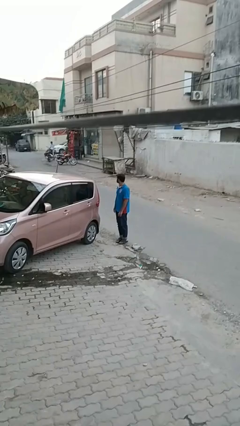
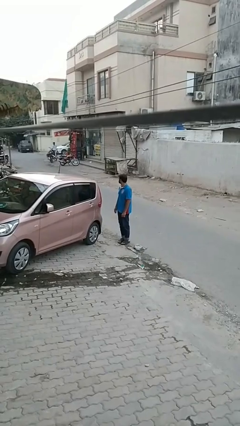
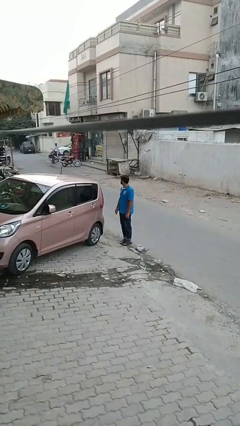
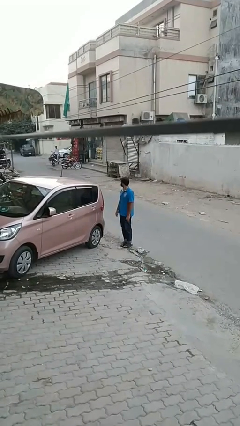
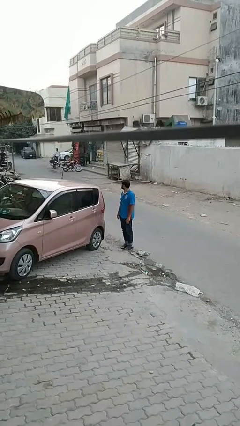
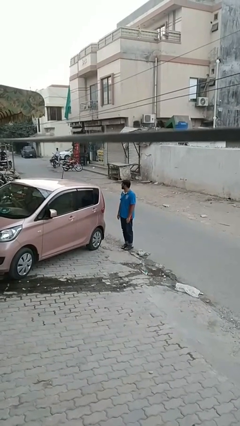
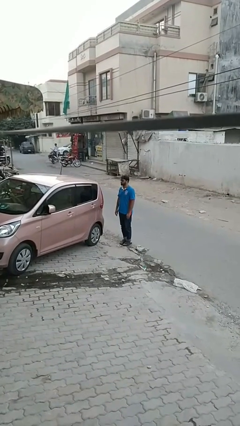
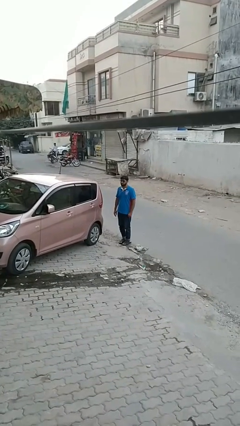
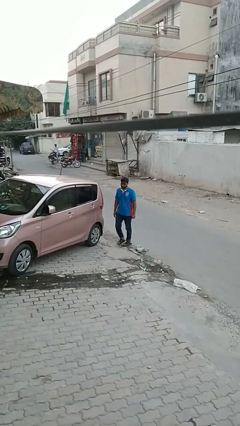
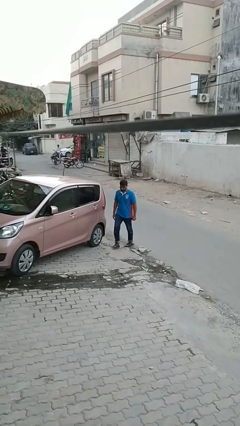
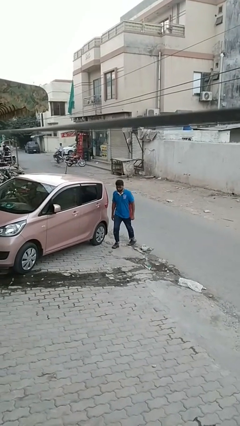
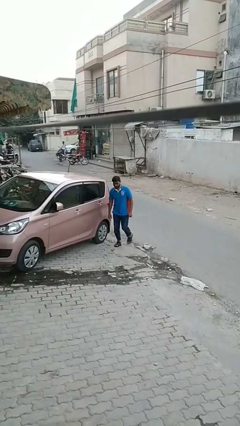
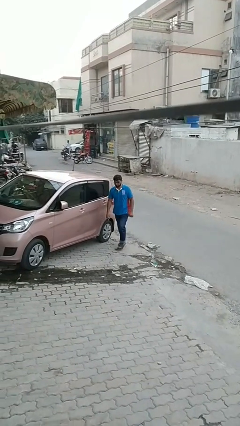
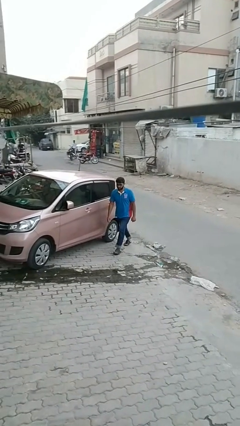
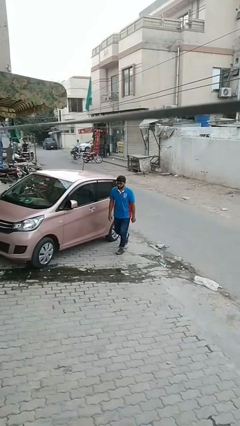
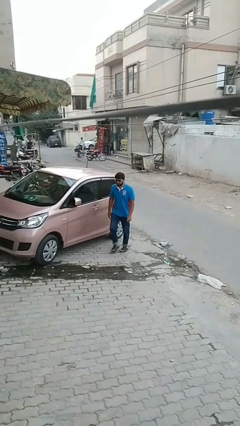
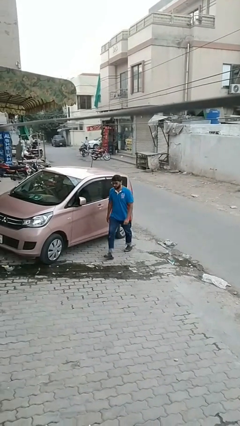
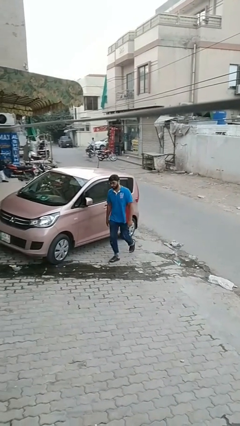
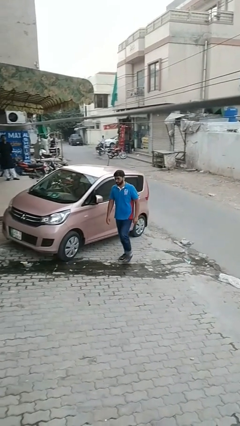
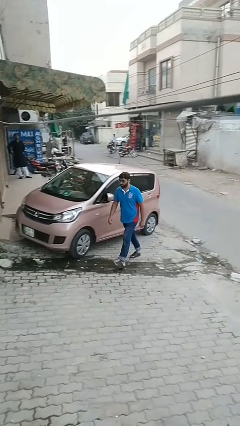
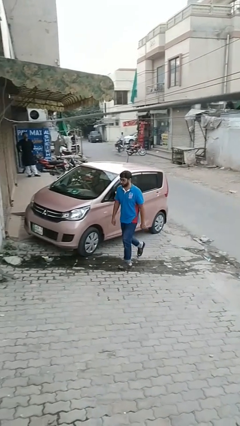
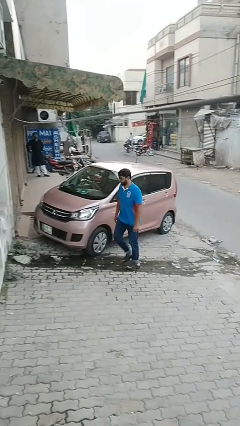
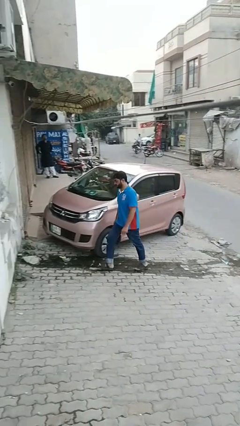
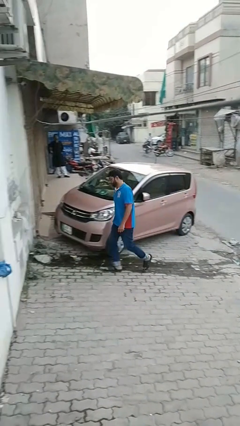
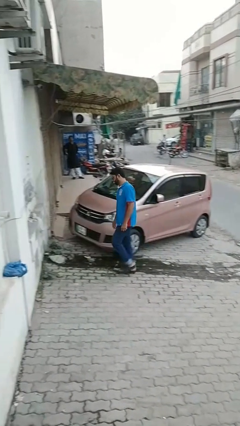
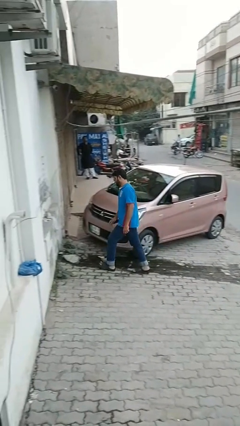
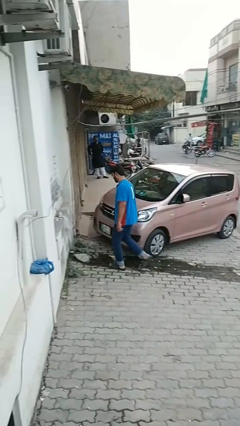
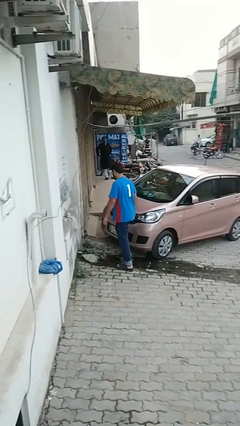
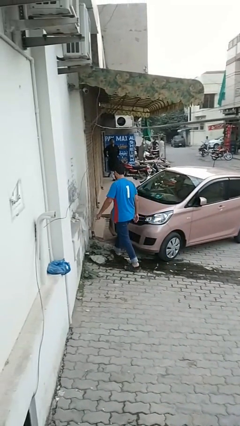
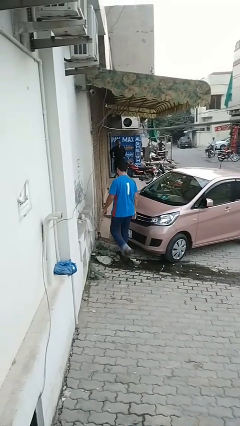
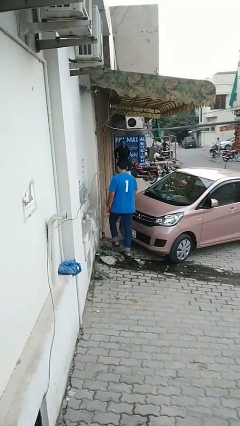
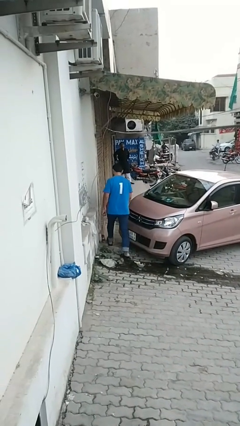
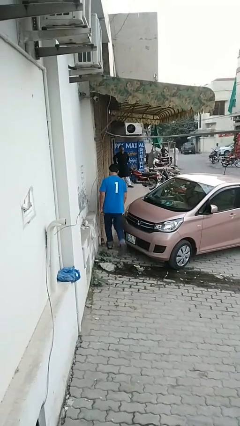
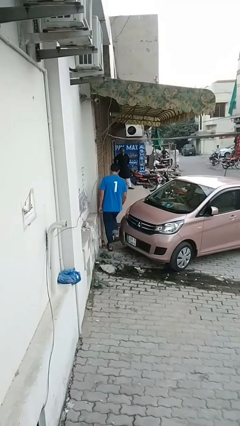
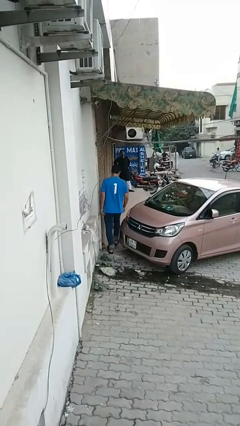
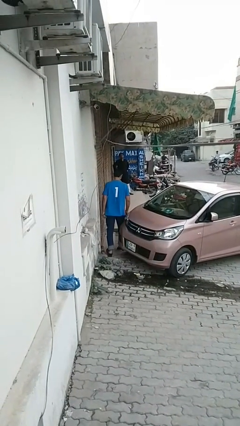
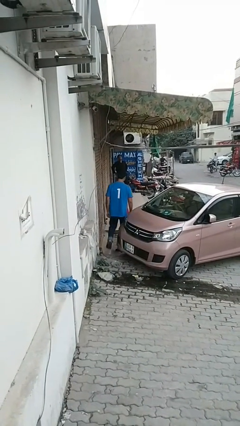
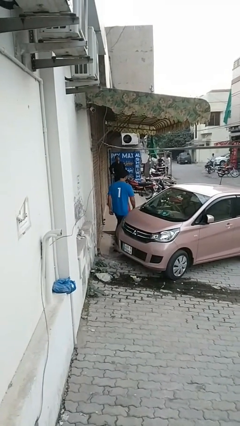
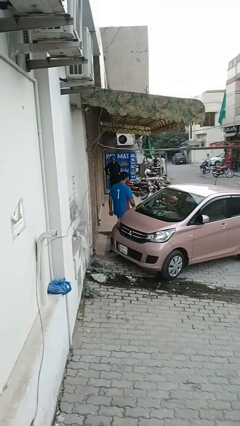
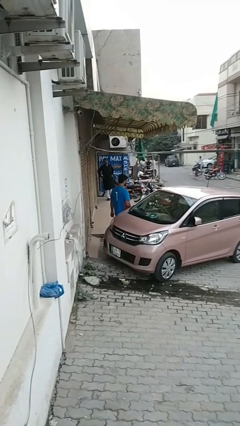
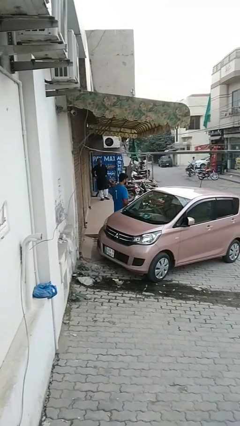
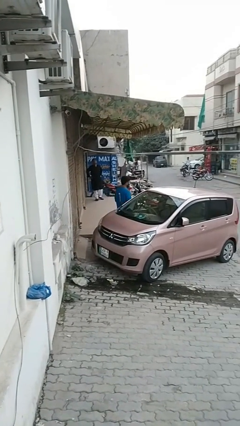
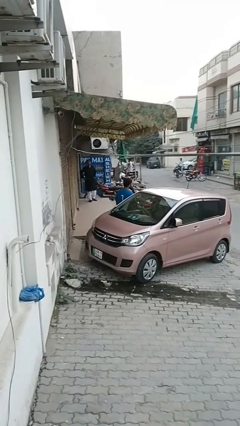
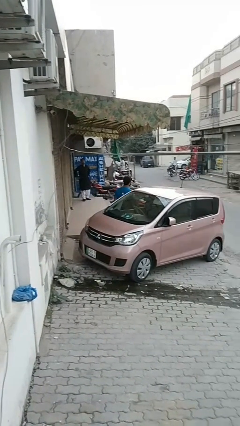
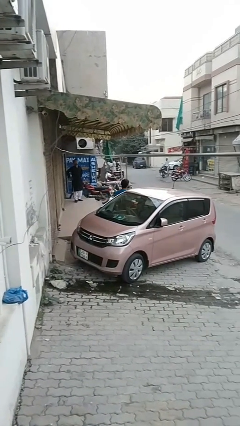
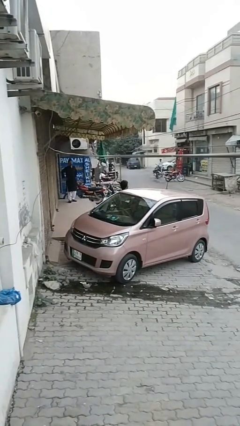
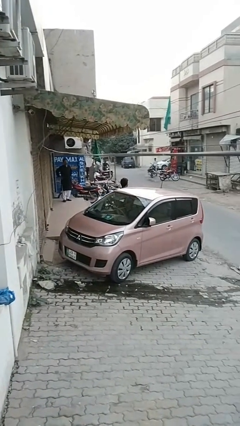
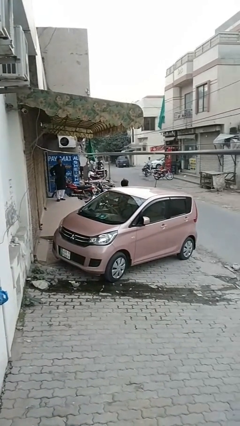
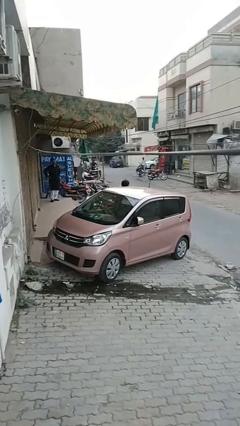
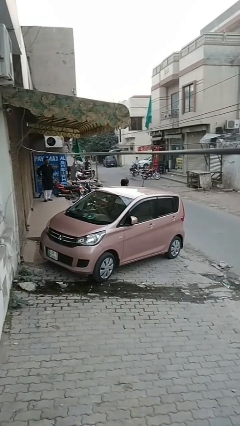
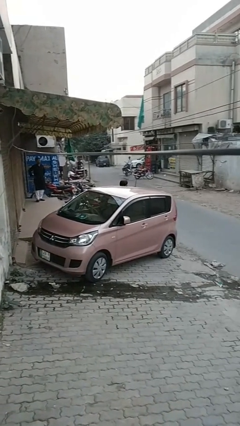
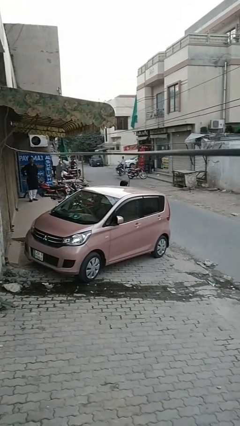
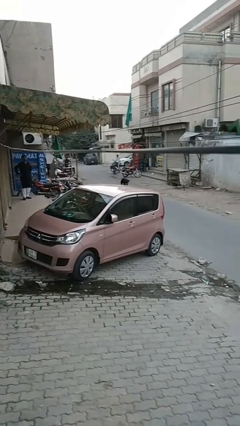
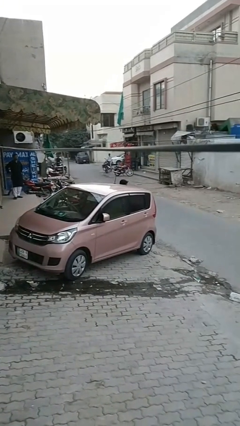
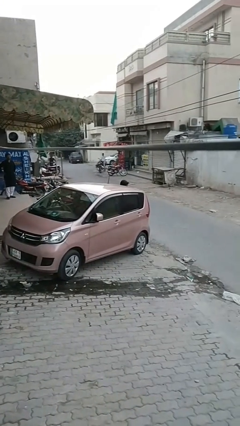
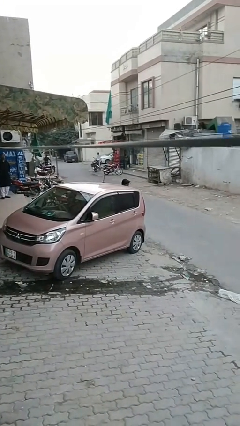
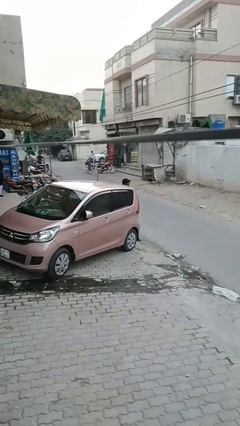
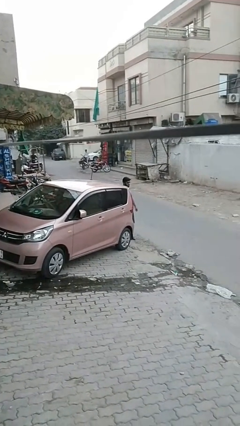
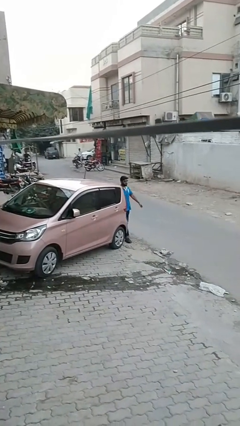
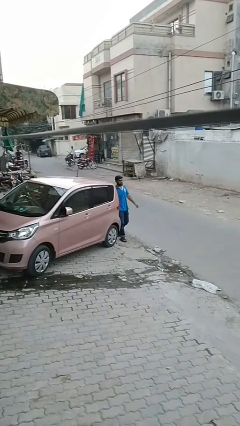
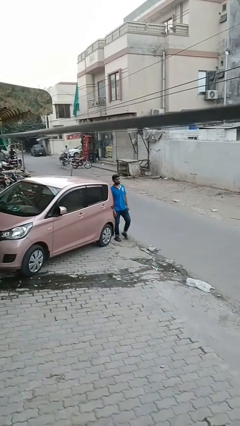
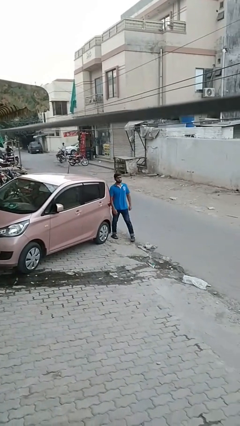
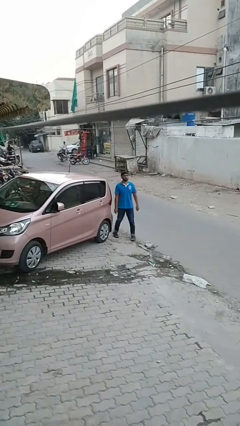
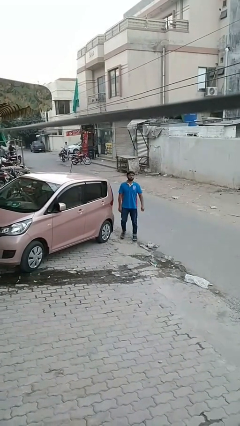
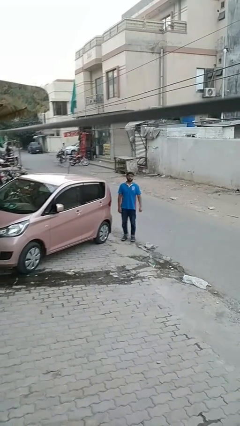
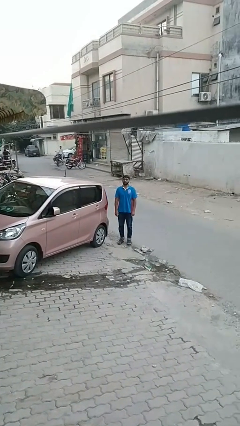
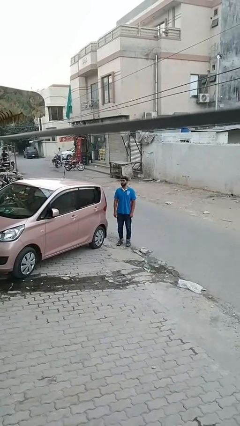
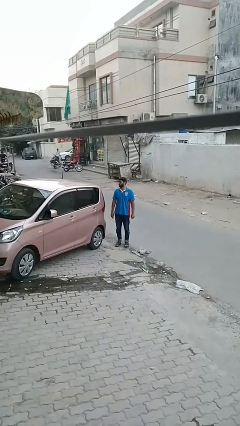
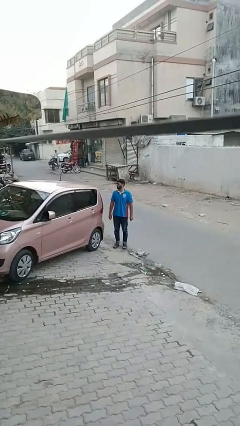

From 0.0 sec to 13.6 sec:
person walks around car

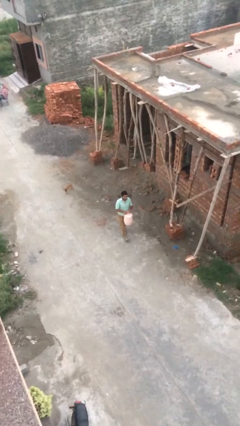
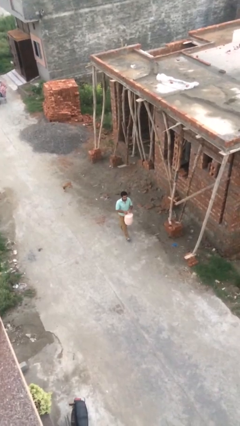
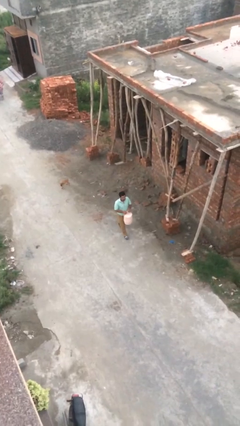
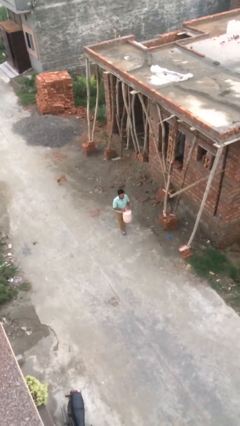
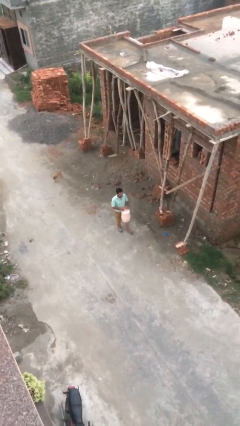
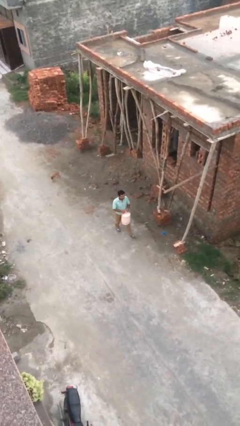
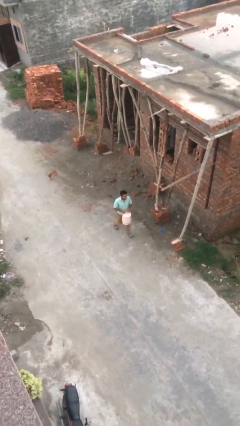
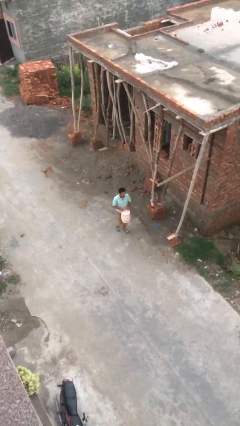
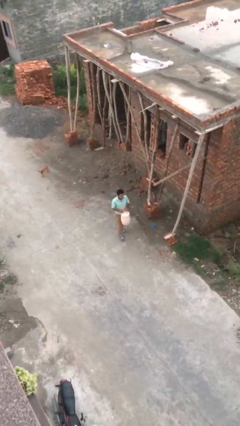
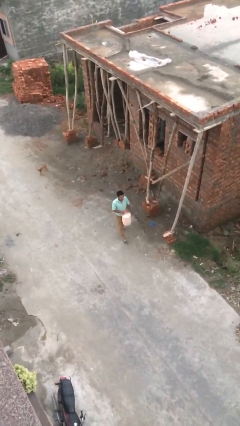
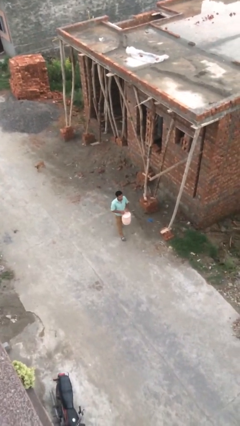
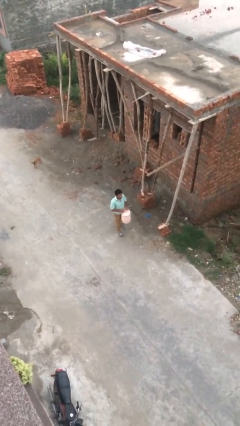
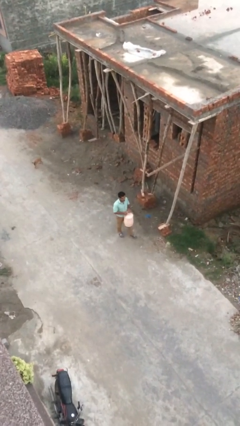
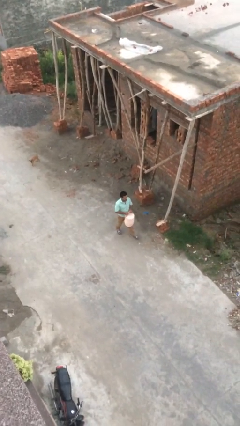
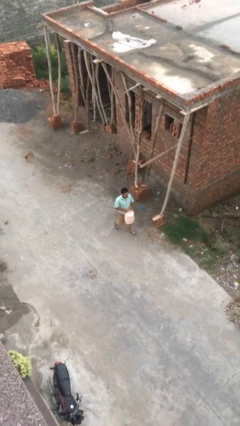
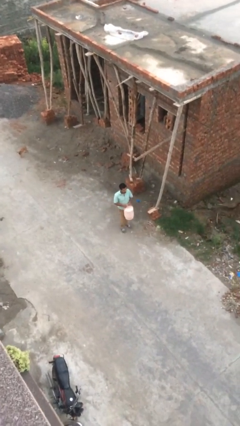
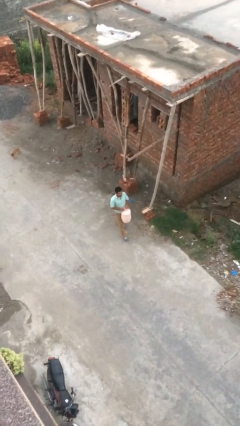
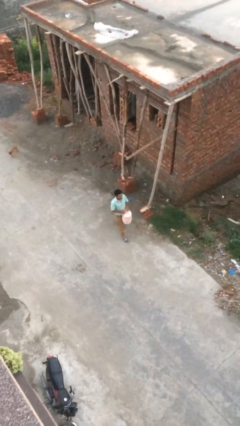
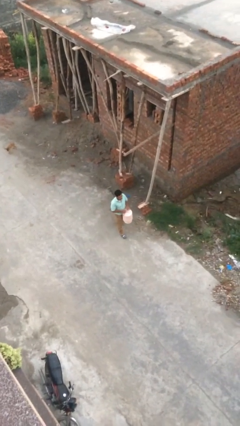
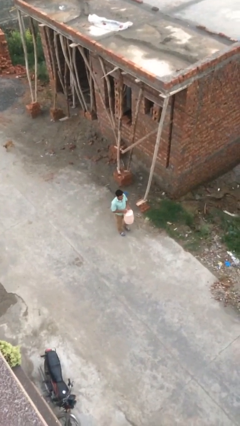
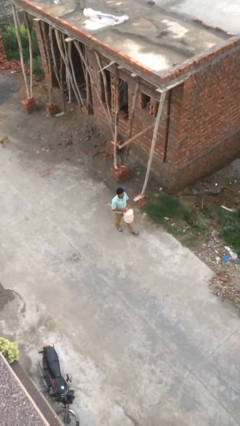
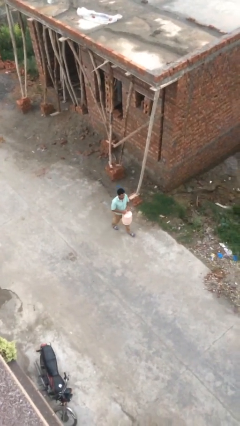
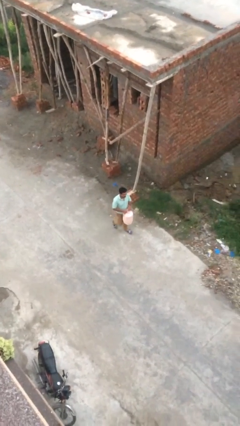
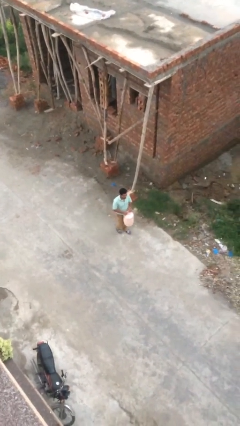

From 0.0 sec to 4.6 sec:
person carries heavy object
